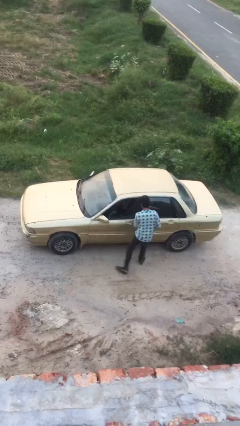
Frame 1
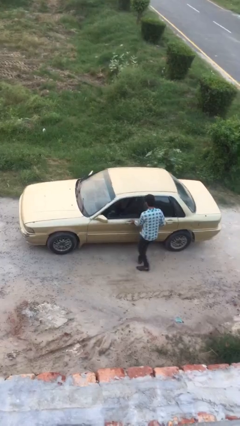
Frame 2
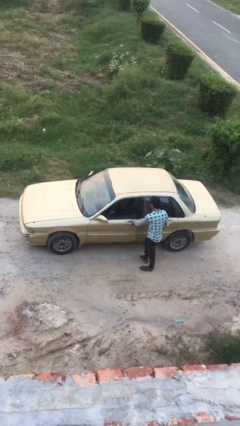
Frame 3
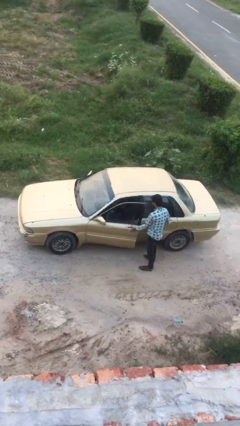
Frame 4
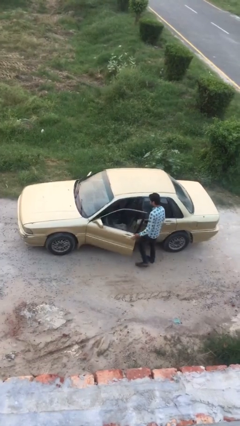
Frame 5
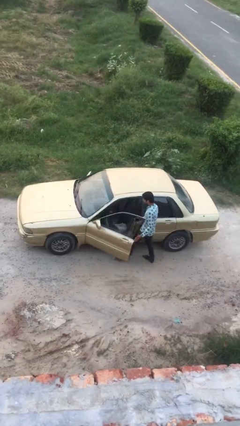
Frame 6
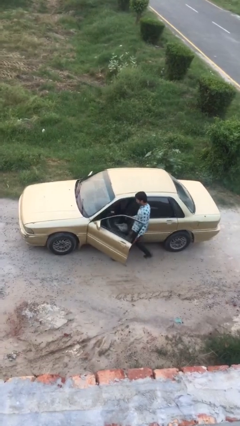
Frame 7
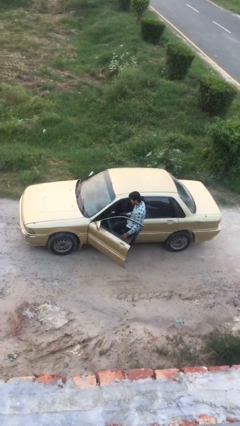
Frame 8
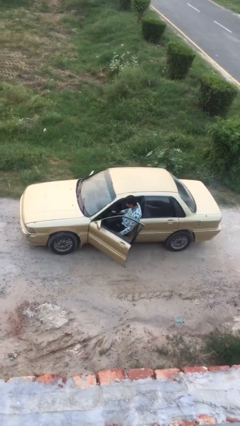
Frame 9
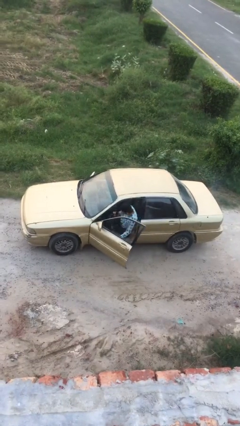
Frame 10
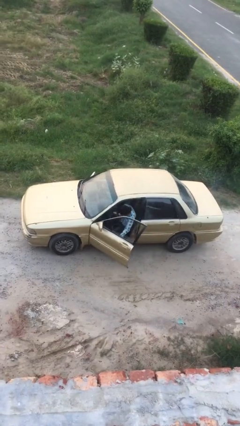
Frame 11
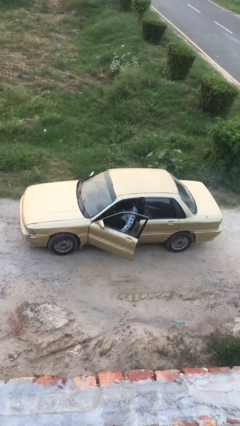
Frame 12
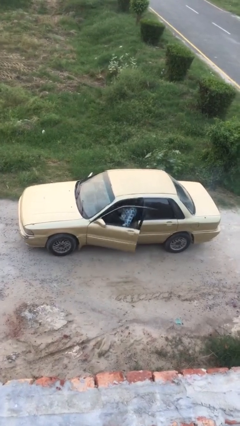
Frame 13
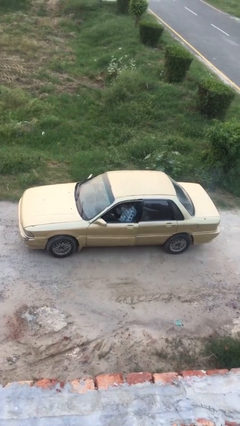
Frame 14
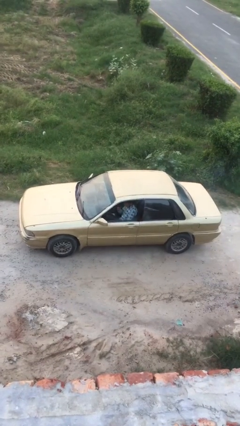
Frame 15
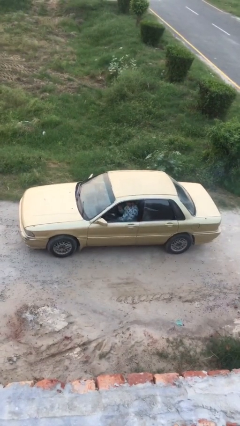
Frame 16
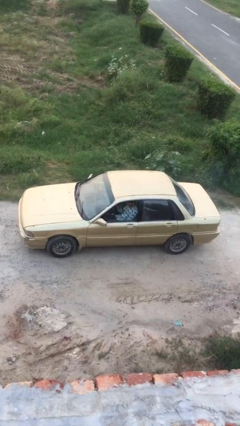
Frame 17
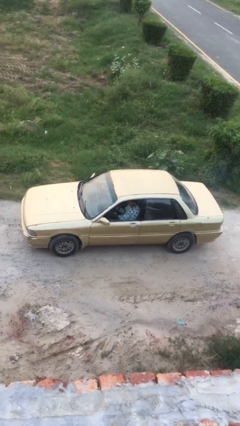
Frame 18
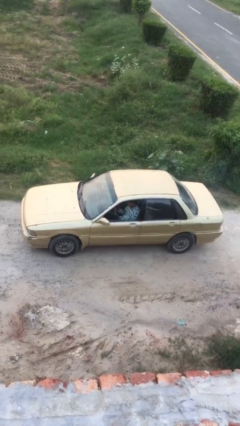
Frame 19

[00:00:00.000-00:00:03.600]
car picks up person

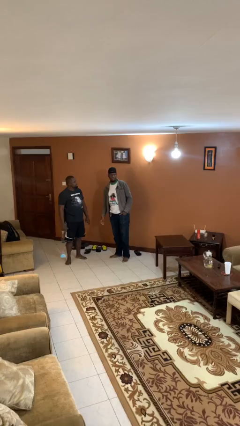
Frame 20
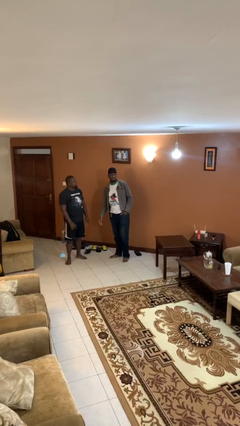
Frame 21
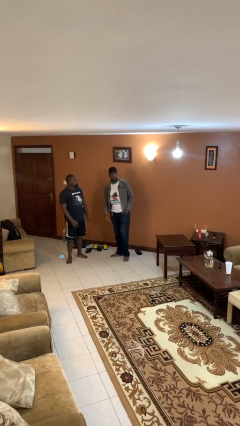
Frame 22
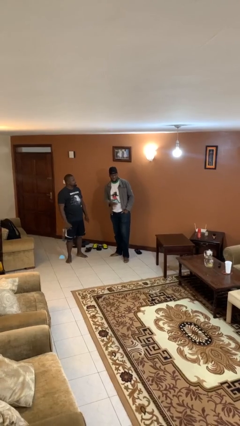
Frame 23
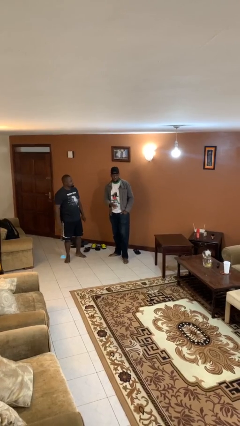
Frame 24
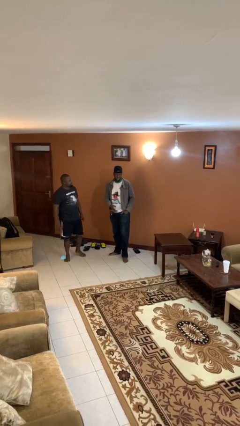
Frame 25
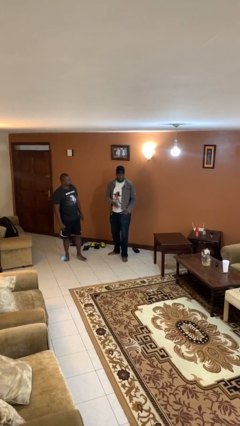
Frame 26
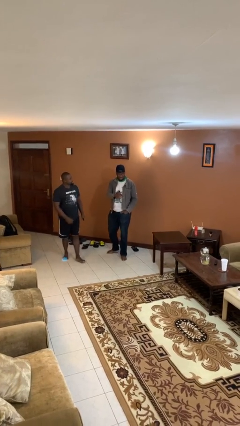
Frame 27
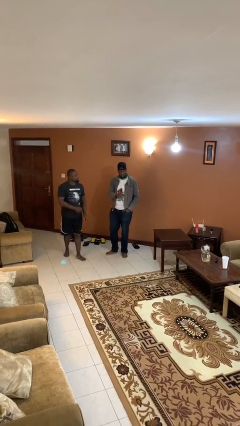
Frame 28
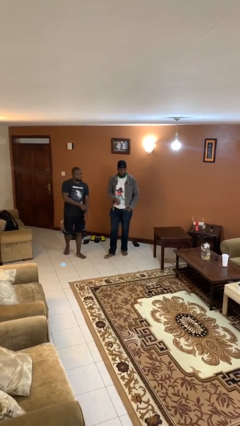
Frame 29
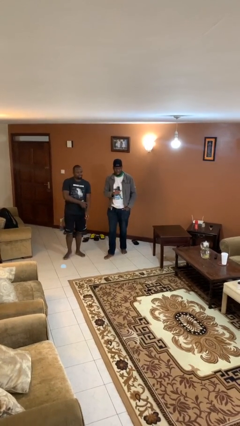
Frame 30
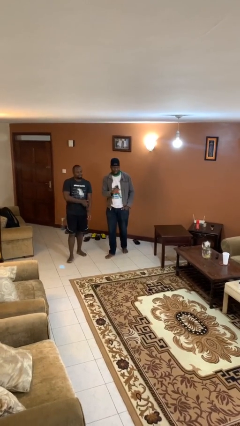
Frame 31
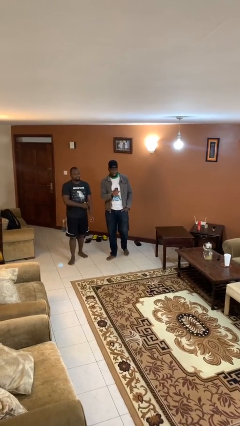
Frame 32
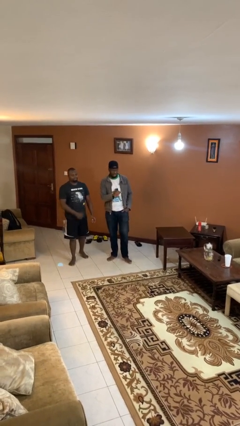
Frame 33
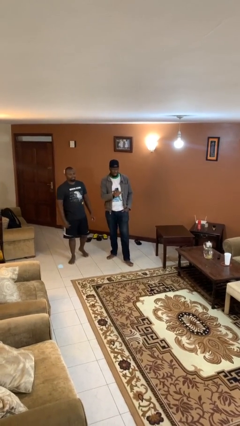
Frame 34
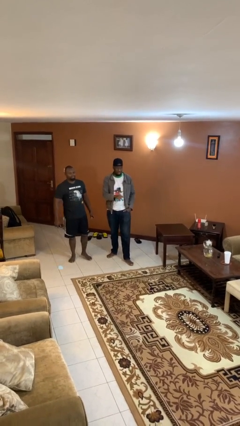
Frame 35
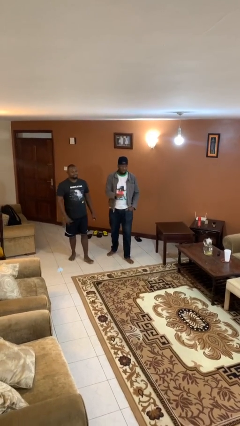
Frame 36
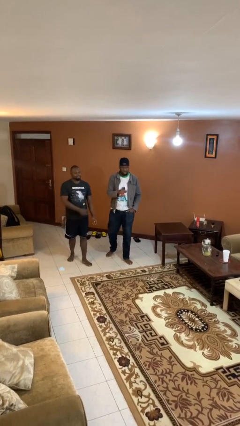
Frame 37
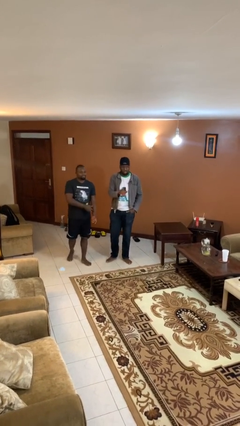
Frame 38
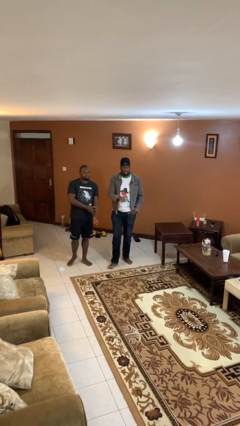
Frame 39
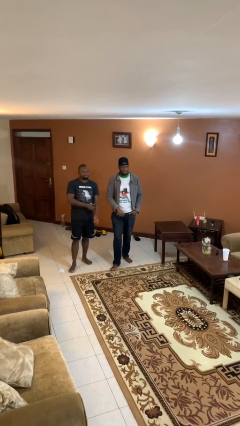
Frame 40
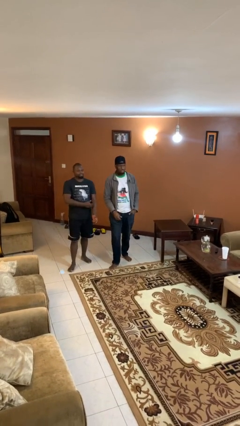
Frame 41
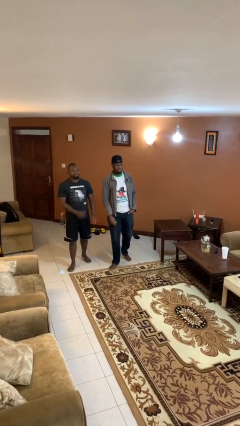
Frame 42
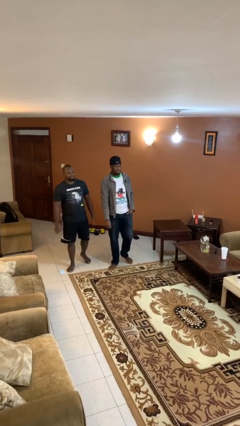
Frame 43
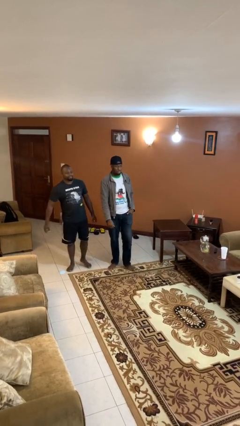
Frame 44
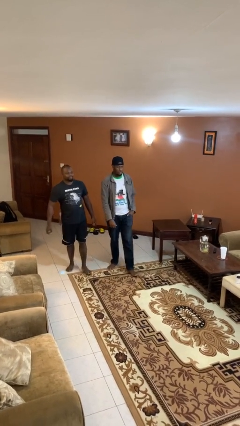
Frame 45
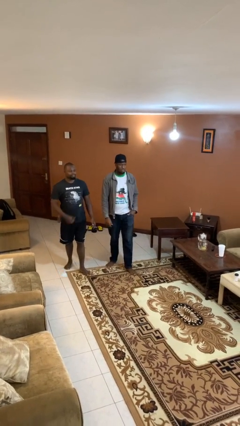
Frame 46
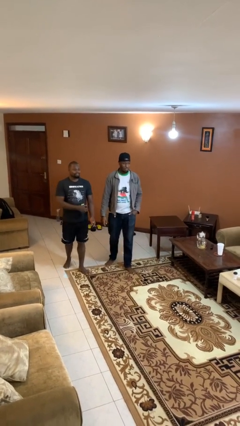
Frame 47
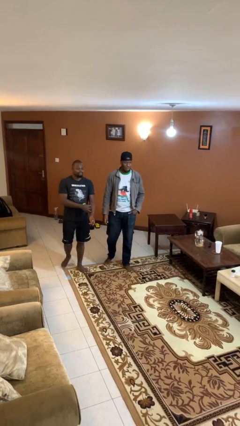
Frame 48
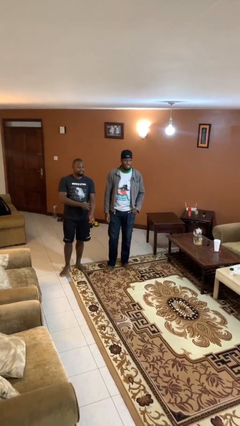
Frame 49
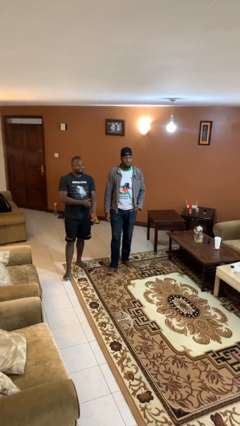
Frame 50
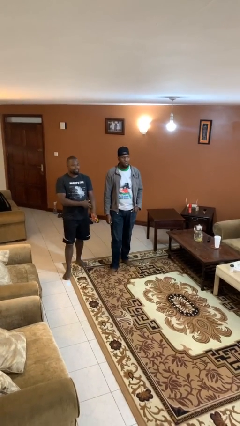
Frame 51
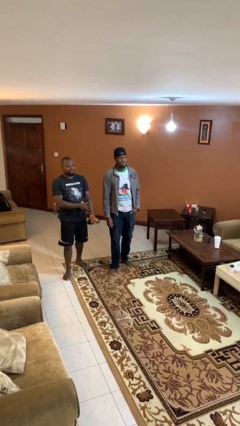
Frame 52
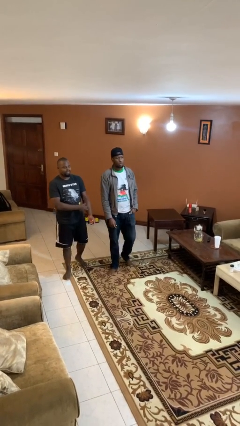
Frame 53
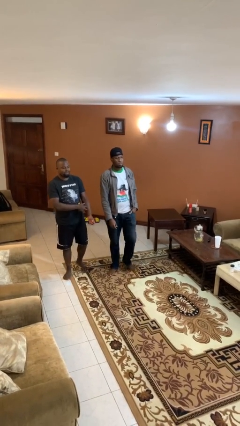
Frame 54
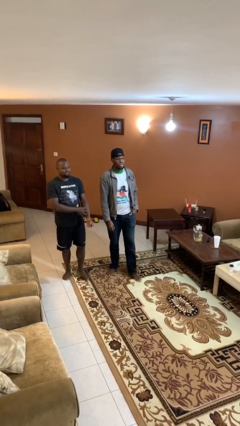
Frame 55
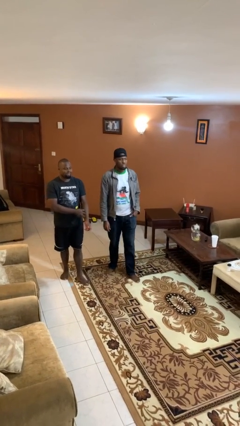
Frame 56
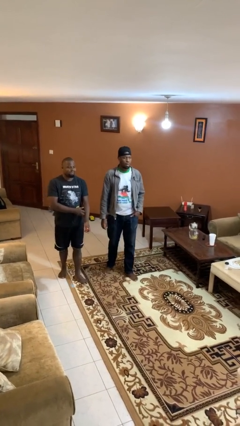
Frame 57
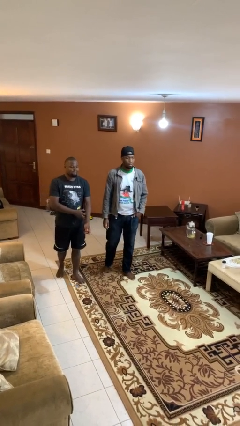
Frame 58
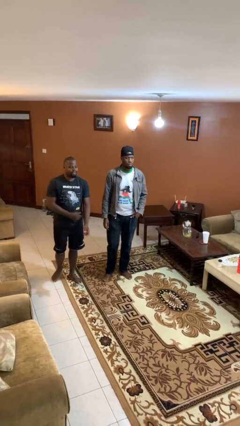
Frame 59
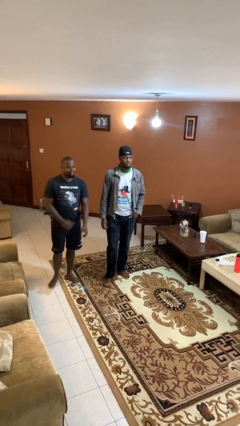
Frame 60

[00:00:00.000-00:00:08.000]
person talks to person

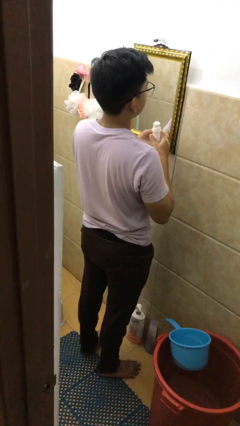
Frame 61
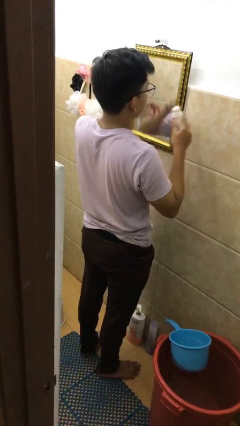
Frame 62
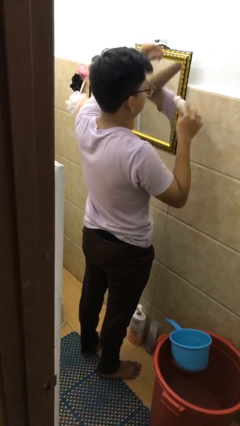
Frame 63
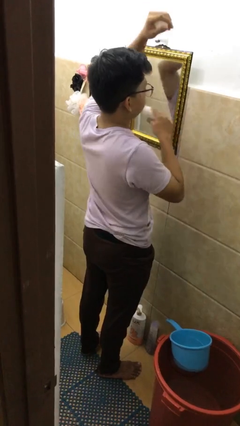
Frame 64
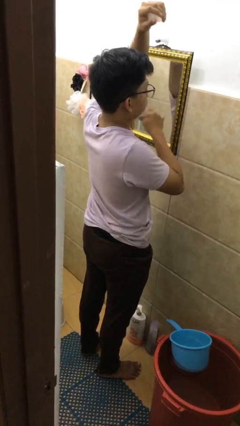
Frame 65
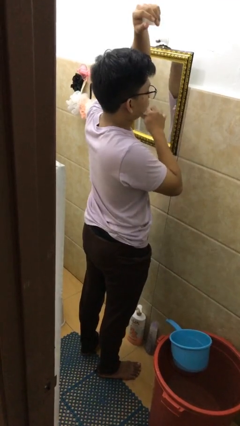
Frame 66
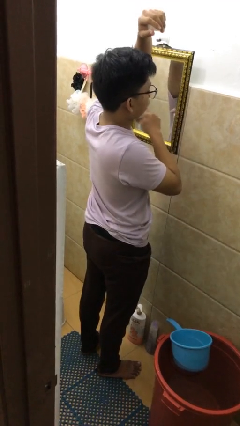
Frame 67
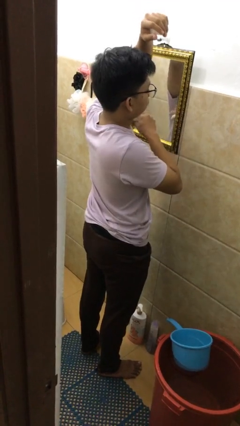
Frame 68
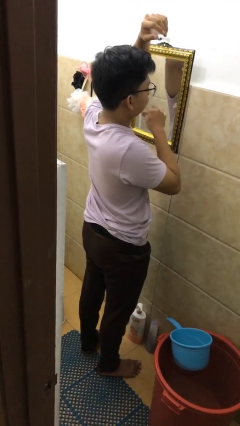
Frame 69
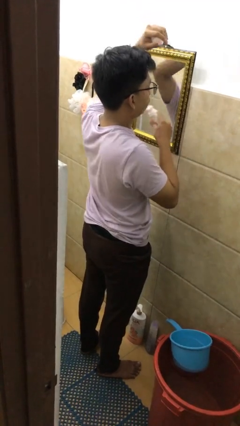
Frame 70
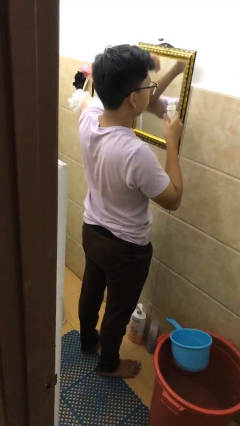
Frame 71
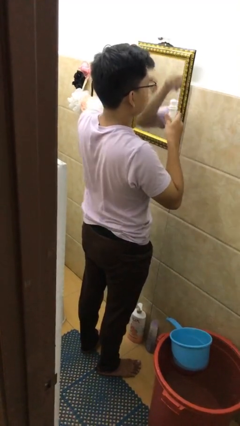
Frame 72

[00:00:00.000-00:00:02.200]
person applies deodorant

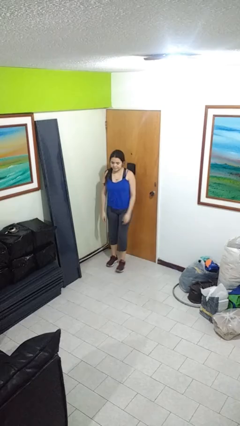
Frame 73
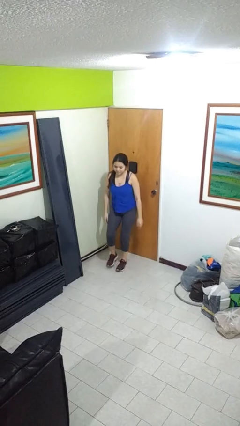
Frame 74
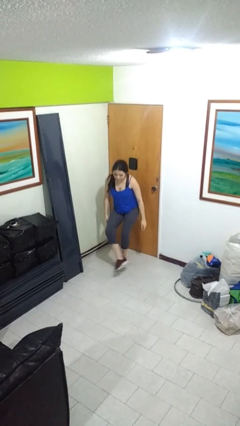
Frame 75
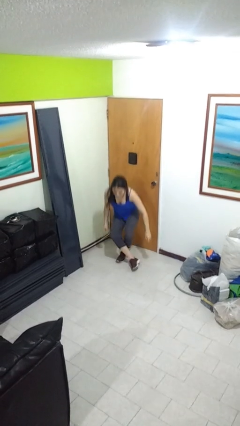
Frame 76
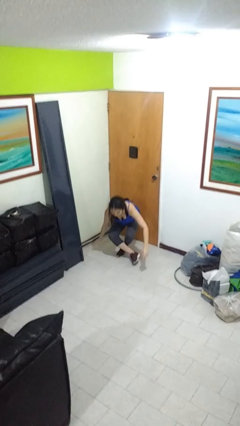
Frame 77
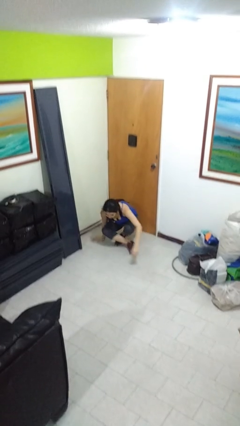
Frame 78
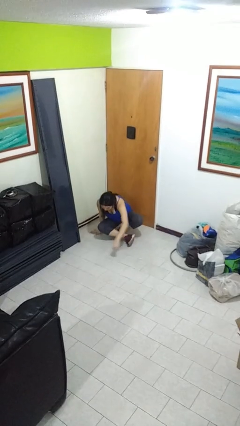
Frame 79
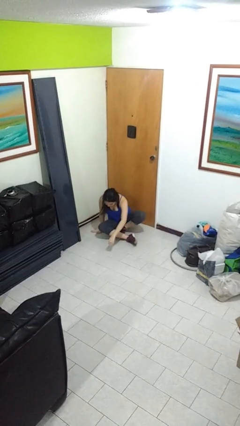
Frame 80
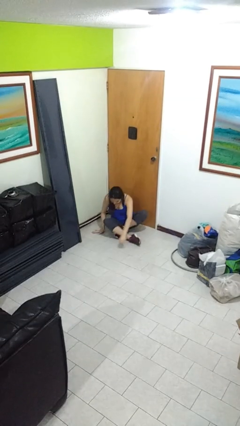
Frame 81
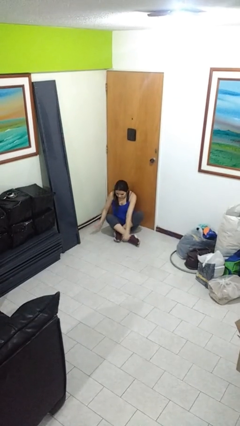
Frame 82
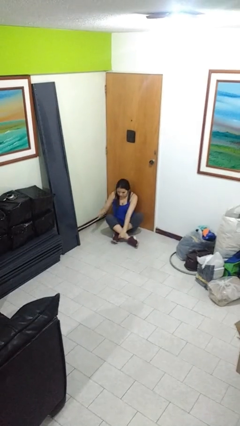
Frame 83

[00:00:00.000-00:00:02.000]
person sits crisscross

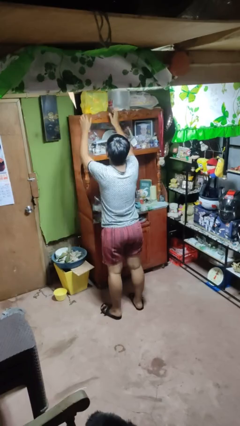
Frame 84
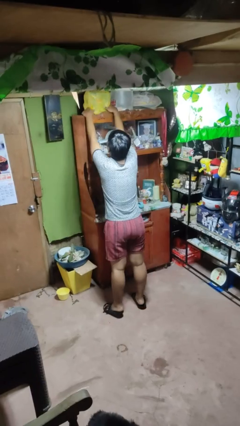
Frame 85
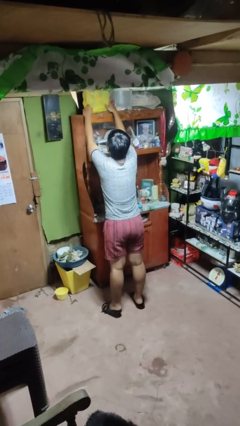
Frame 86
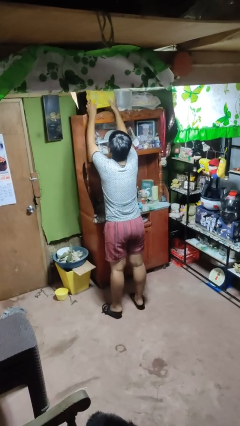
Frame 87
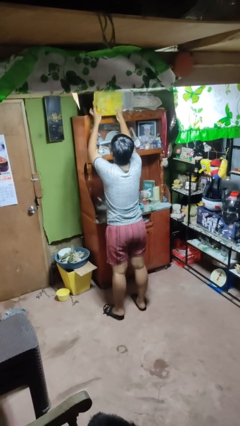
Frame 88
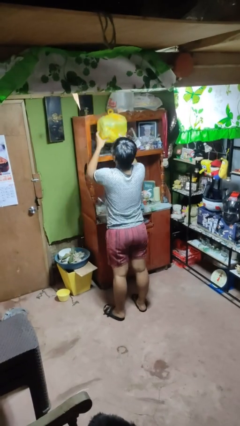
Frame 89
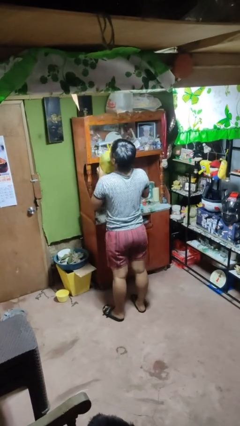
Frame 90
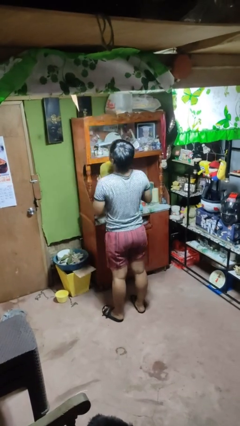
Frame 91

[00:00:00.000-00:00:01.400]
person picks up object from shelf

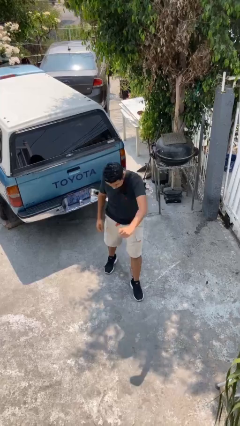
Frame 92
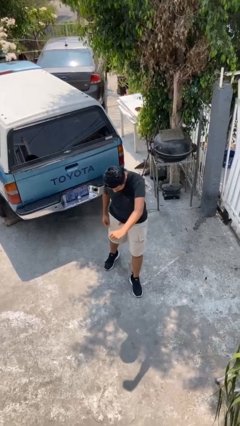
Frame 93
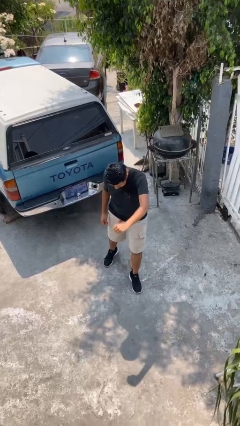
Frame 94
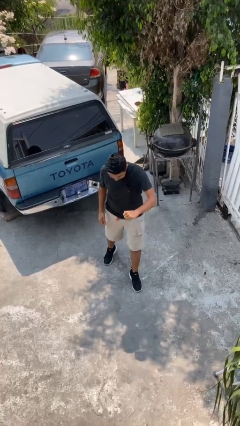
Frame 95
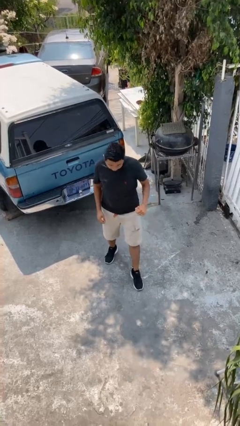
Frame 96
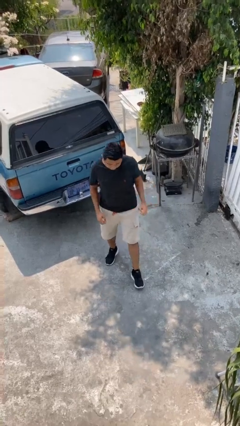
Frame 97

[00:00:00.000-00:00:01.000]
person punches
